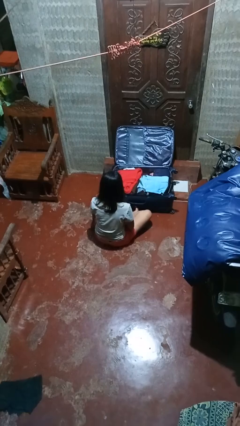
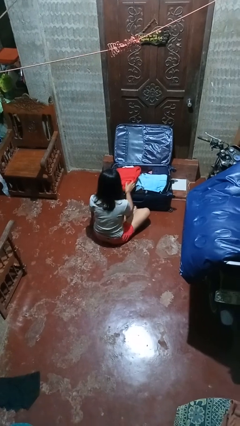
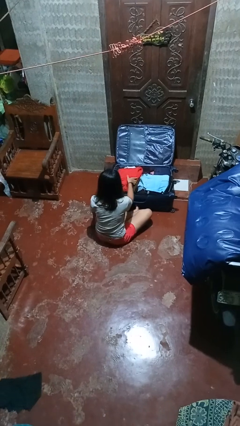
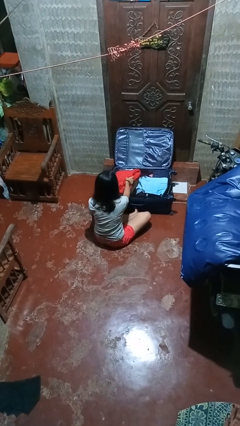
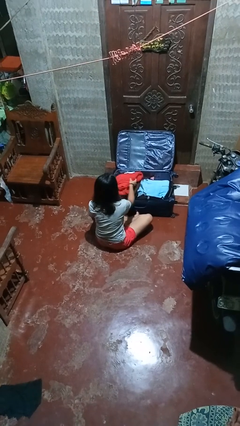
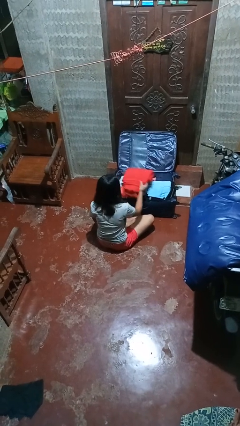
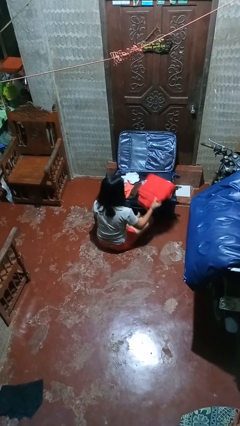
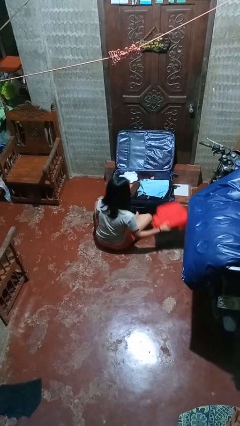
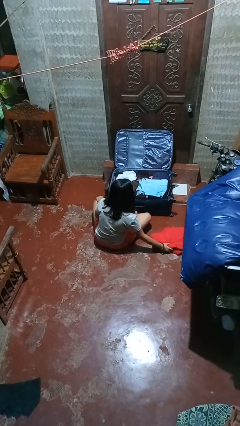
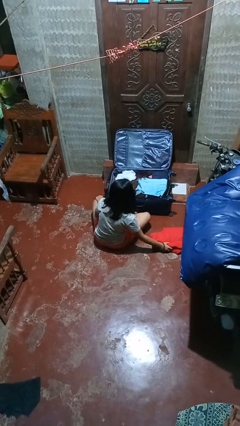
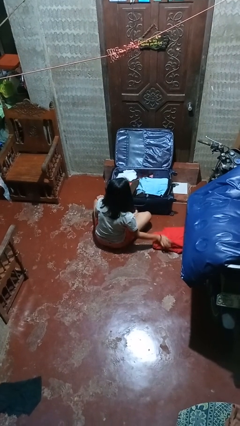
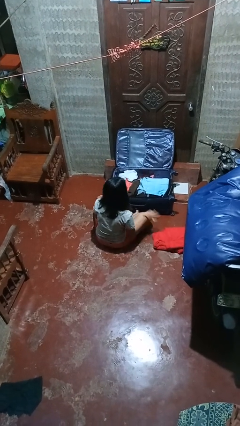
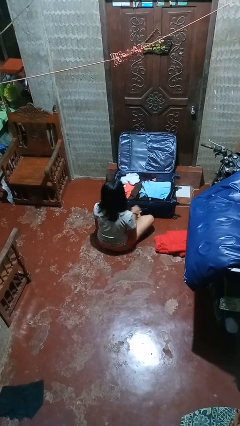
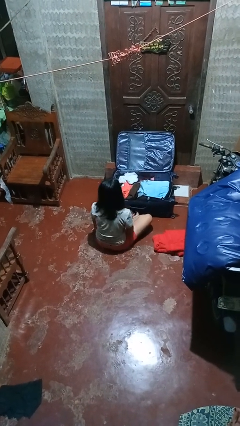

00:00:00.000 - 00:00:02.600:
person unloads clothes from suitcase

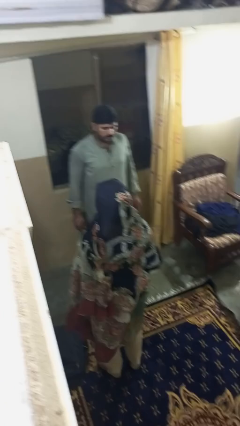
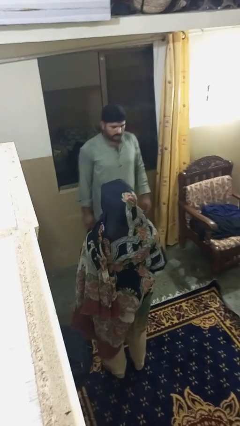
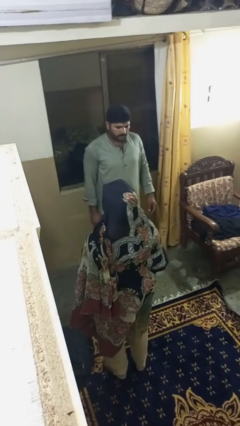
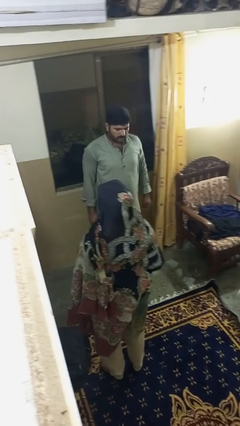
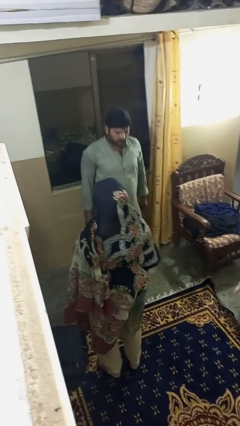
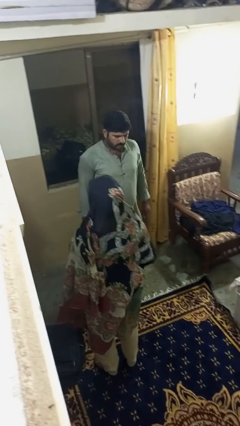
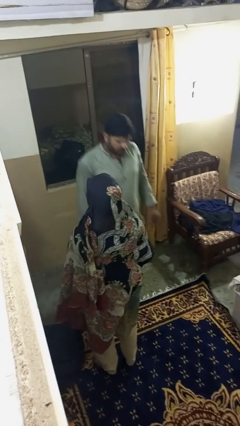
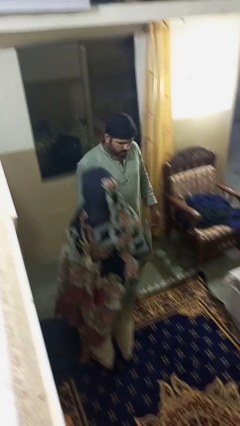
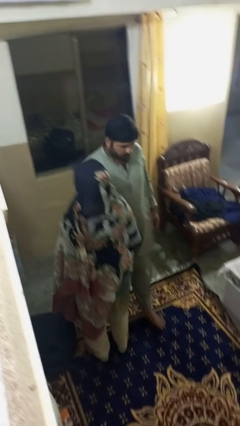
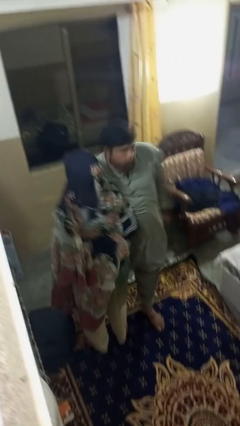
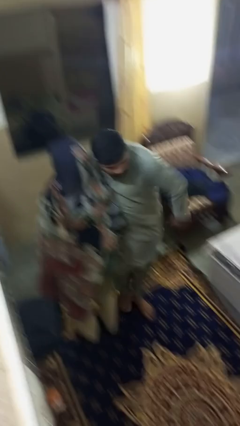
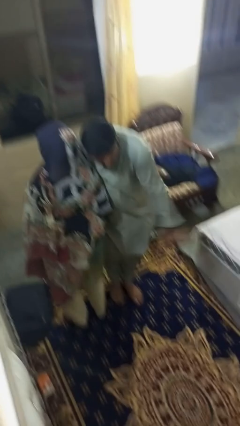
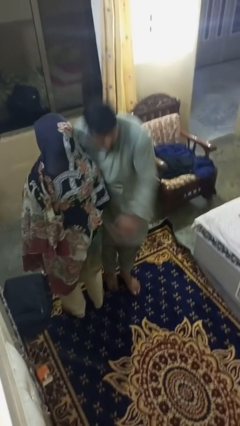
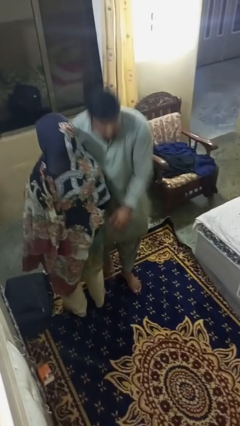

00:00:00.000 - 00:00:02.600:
person bumps into person

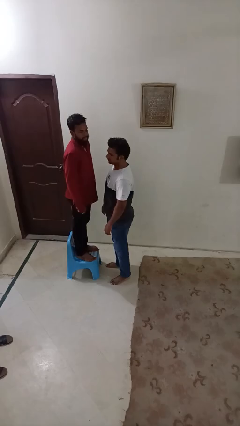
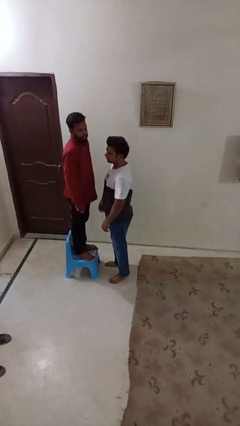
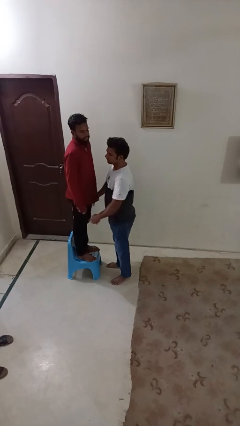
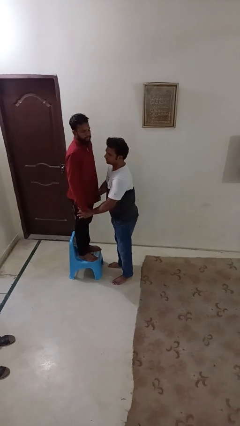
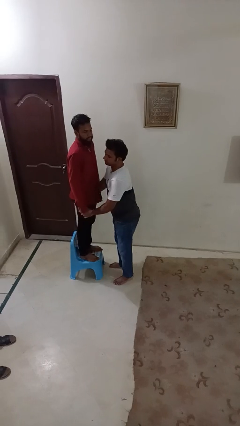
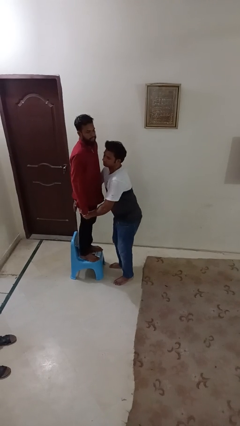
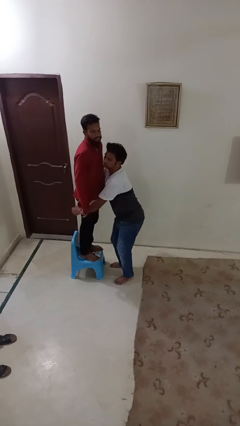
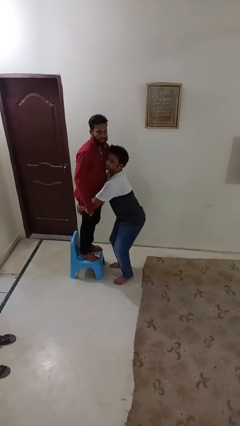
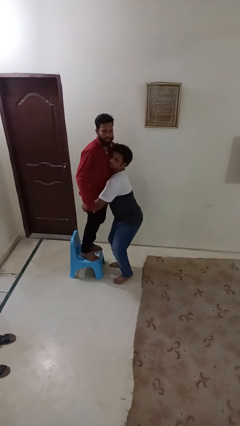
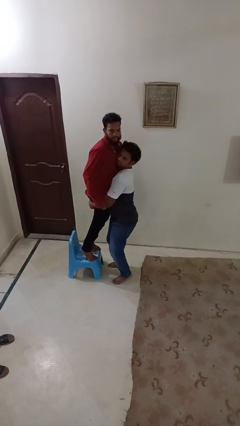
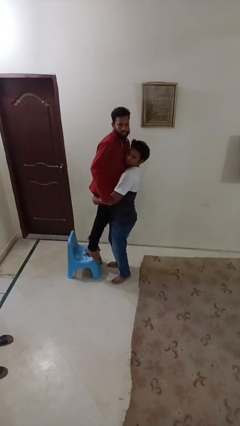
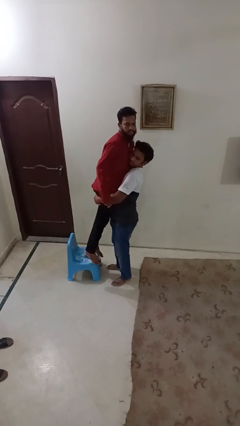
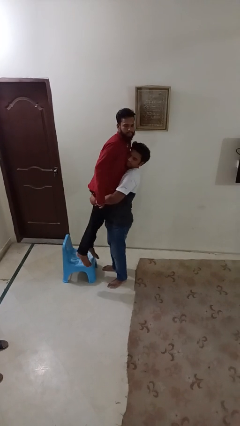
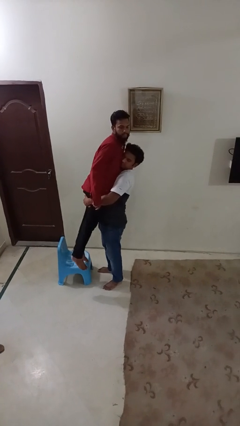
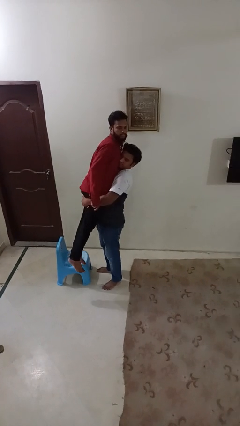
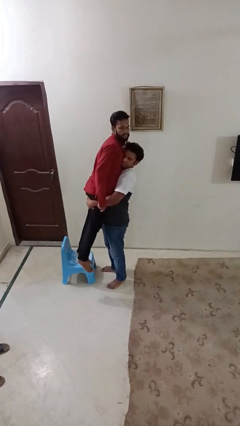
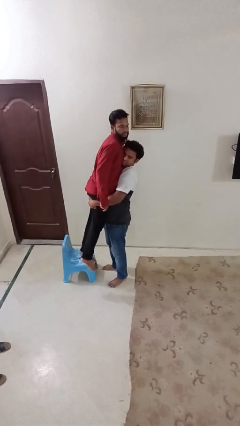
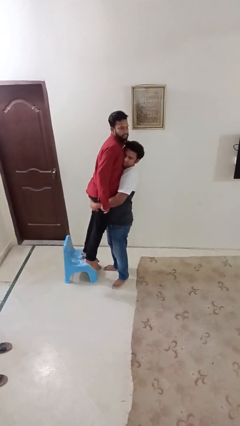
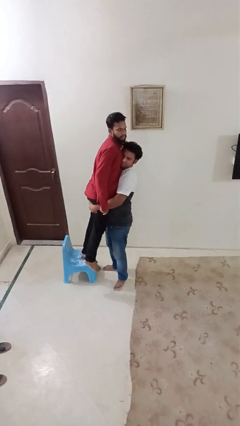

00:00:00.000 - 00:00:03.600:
person picks up person

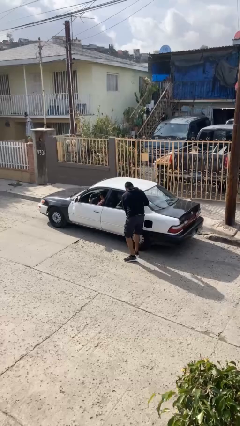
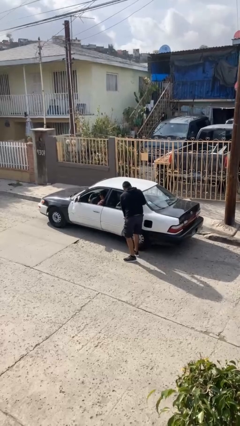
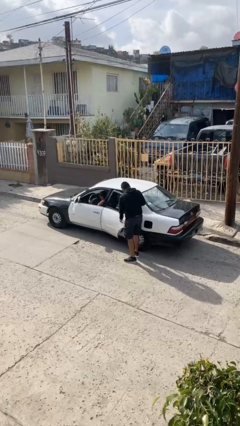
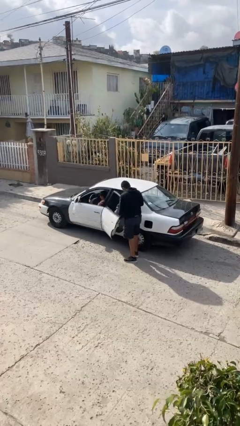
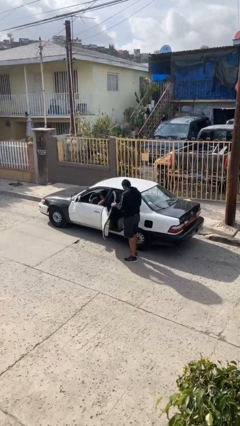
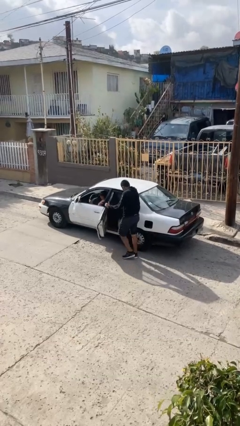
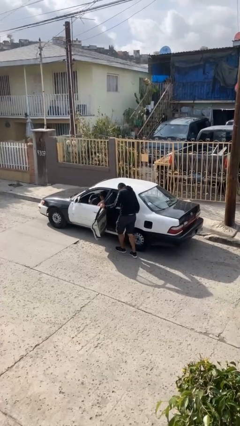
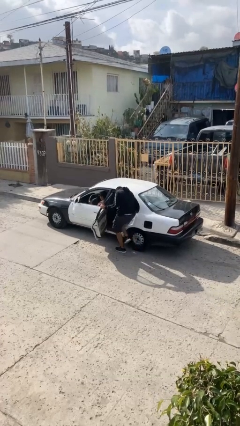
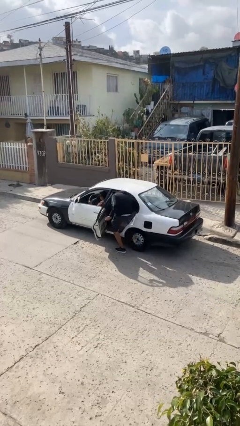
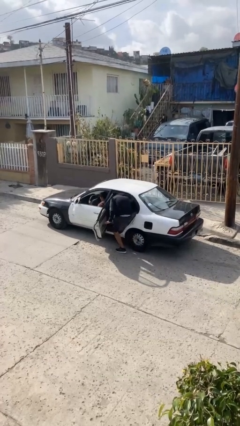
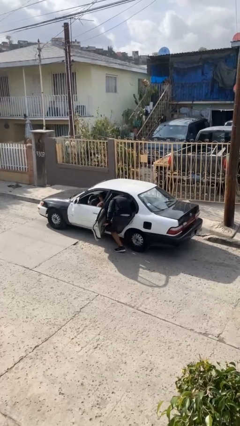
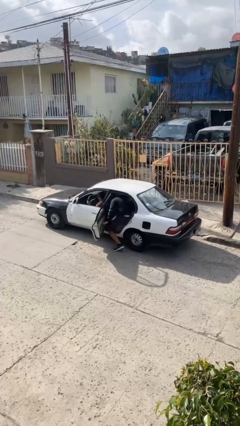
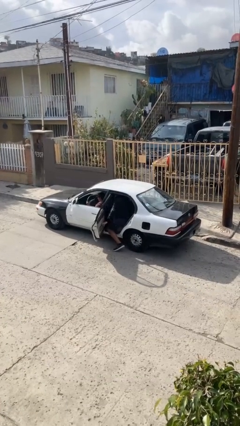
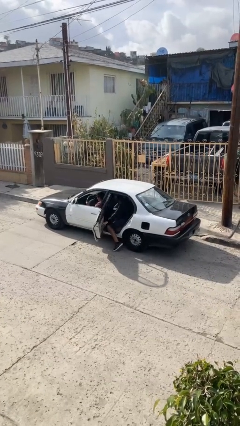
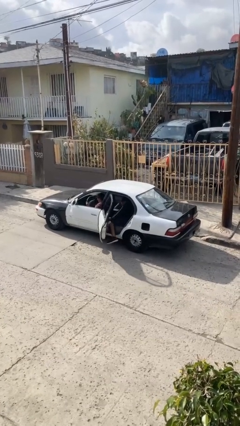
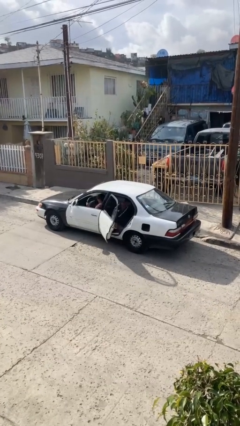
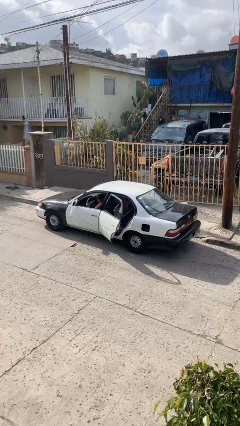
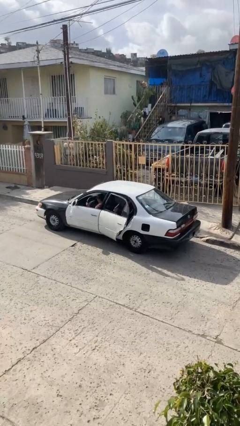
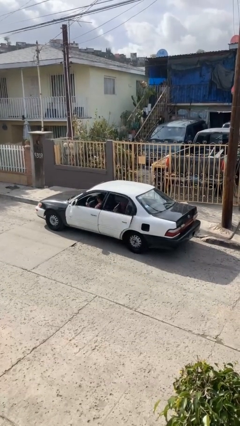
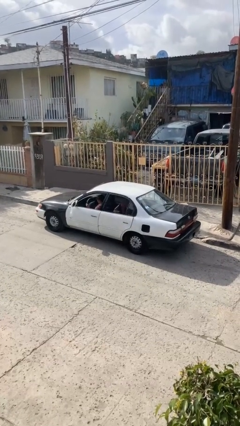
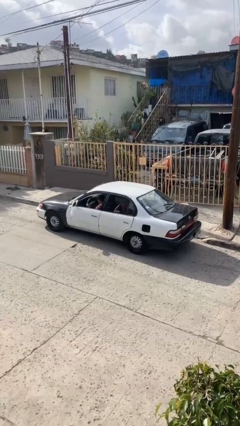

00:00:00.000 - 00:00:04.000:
car picks up person

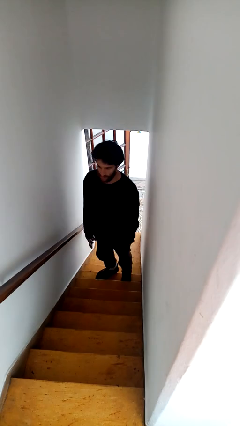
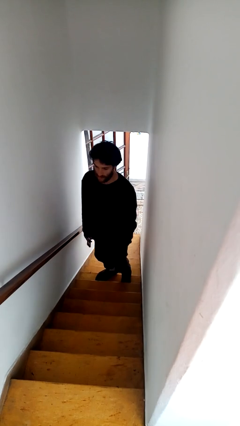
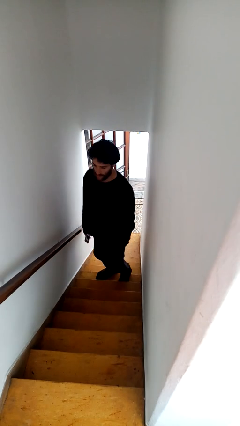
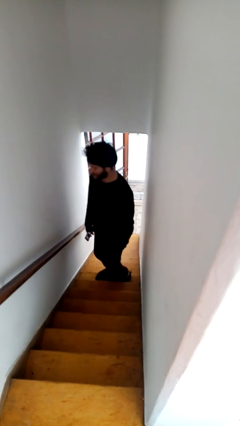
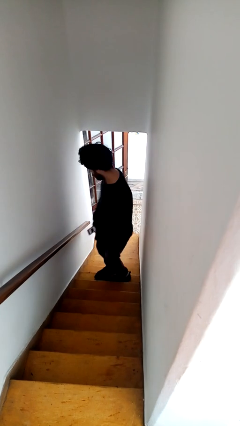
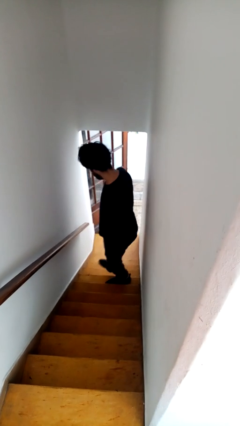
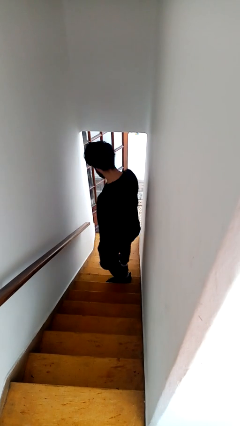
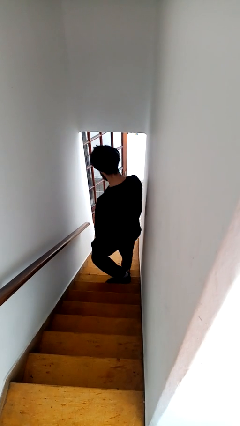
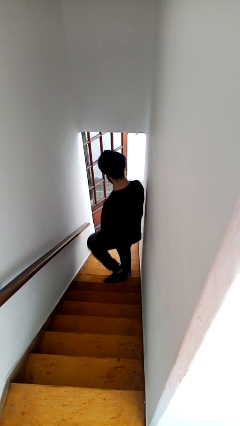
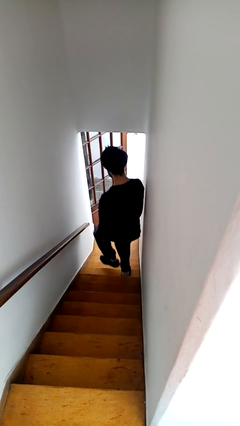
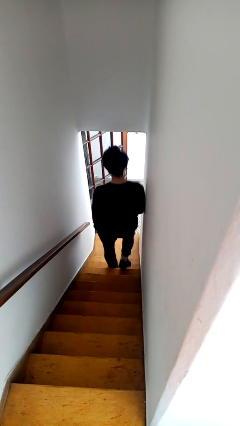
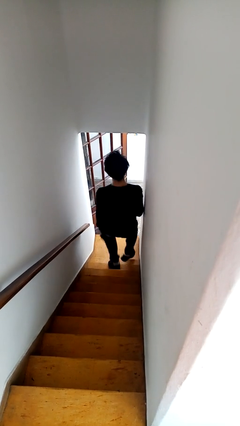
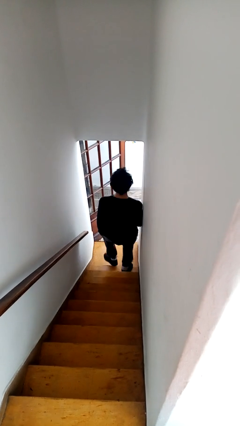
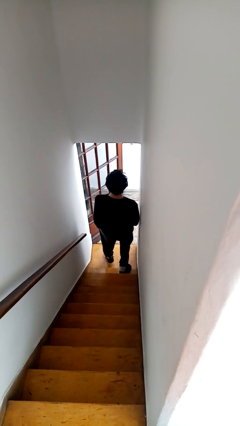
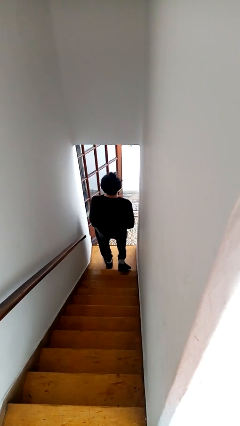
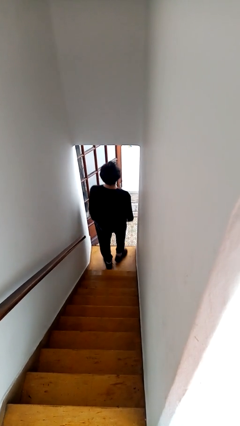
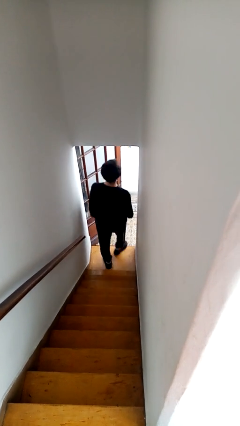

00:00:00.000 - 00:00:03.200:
person climbs down stairs

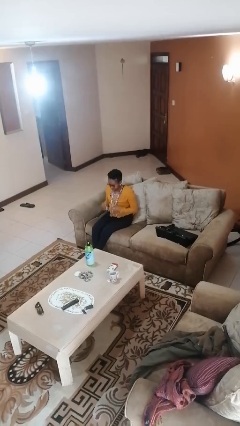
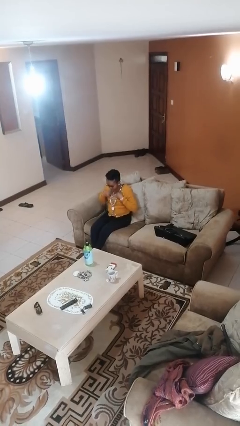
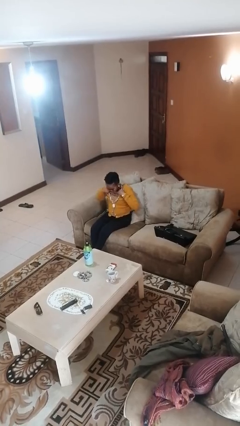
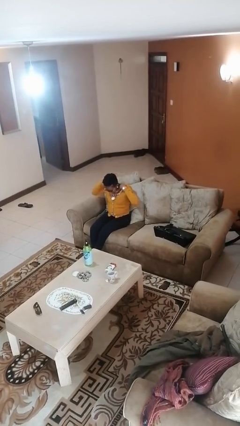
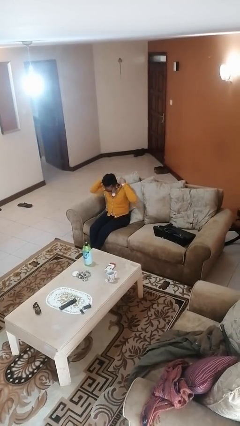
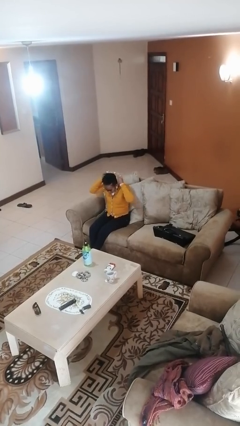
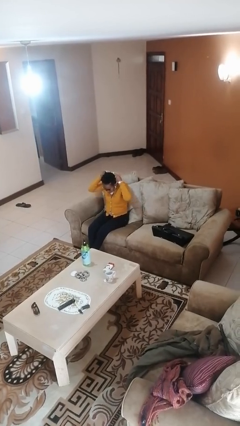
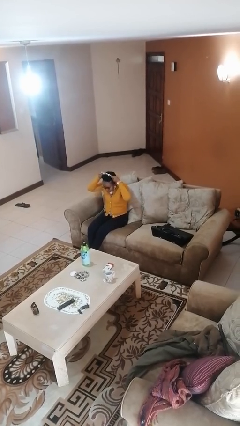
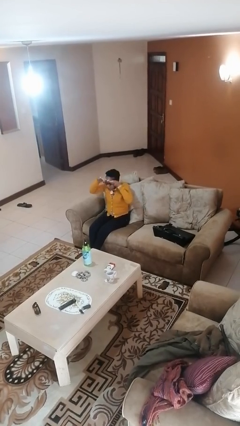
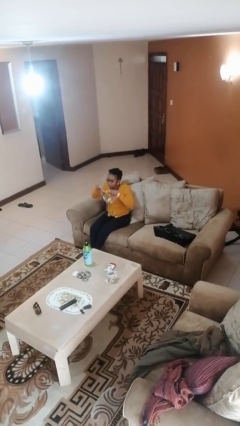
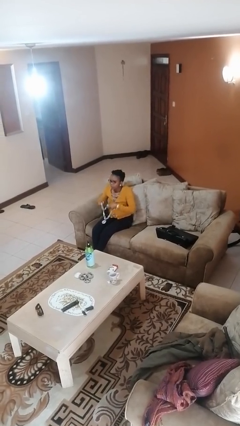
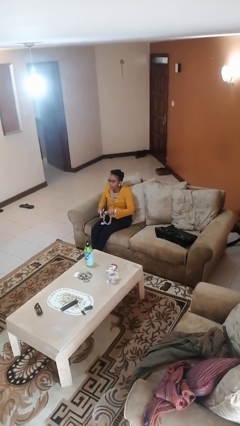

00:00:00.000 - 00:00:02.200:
person takes off necklace
